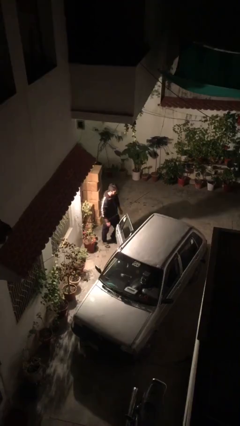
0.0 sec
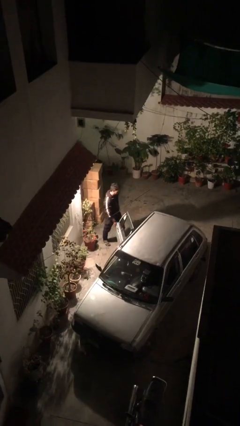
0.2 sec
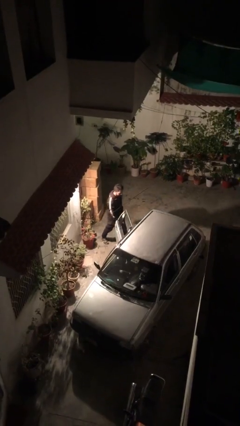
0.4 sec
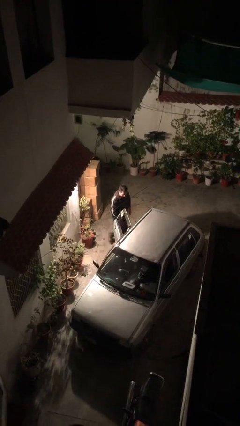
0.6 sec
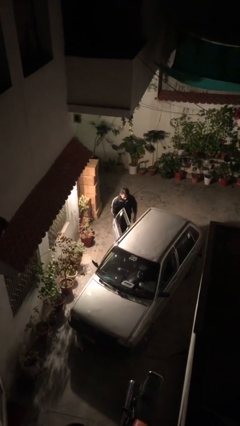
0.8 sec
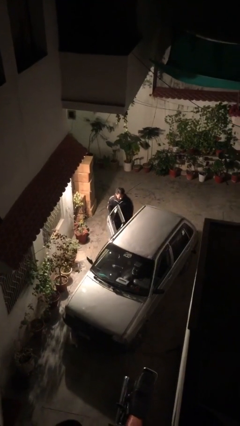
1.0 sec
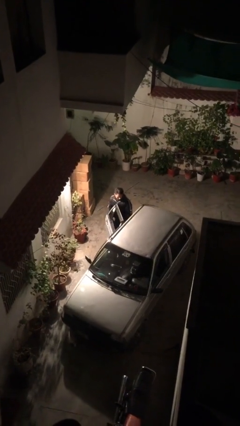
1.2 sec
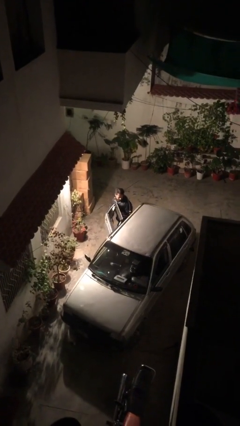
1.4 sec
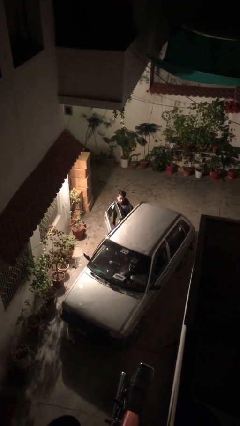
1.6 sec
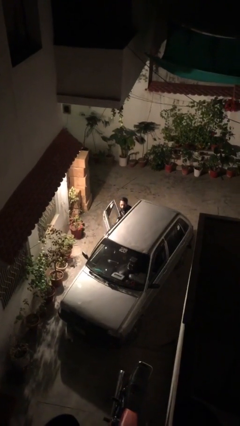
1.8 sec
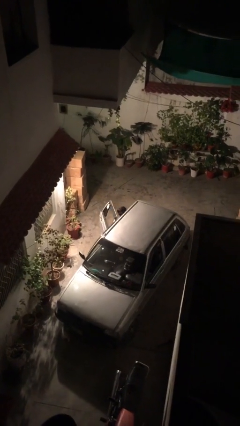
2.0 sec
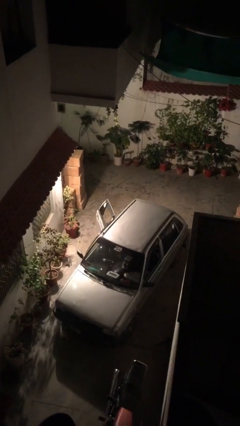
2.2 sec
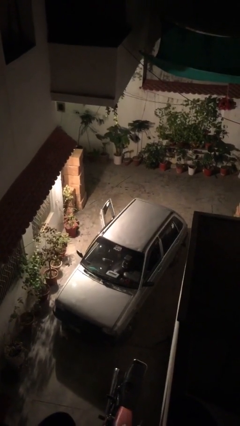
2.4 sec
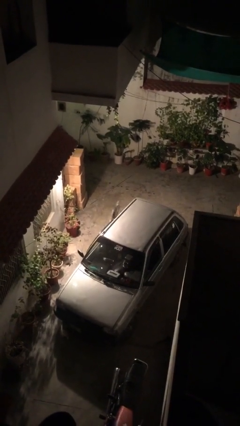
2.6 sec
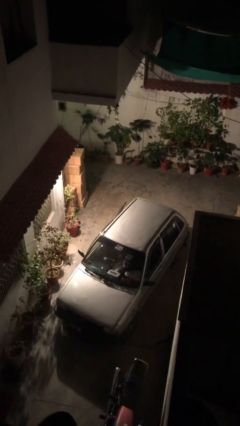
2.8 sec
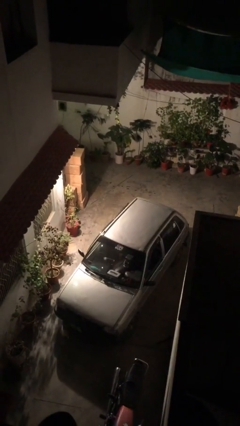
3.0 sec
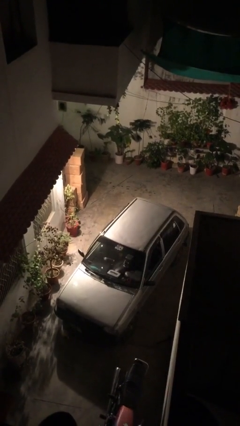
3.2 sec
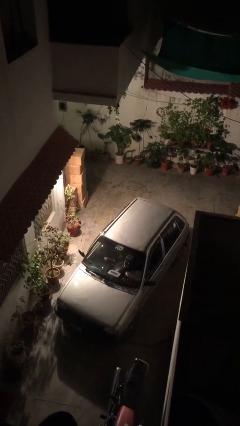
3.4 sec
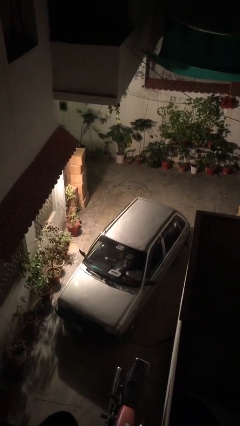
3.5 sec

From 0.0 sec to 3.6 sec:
person enters car

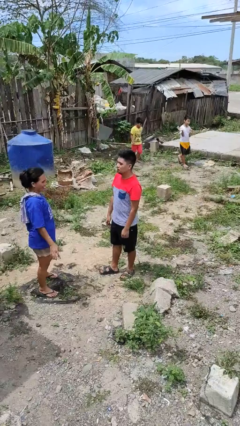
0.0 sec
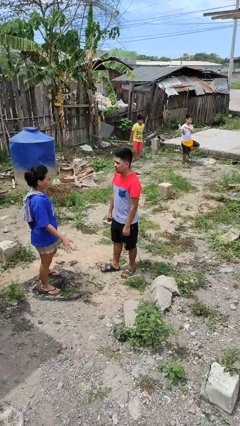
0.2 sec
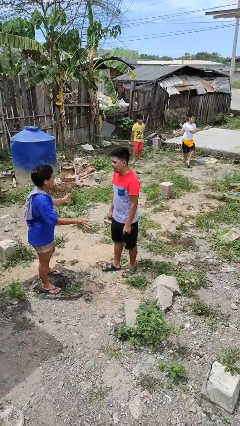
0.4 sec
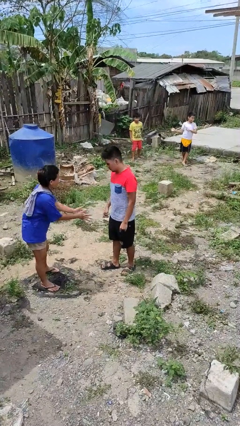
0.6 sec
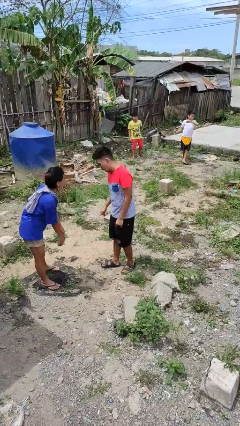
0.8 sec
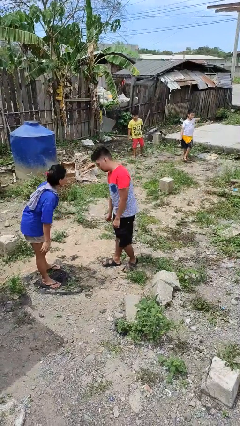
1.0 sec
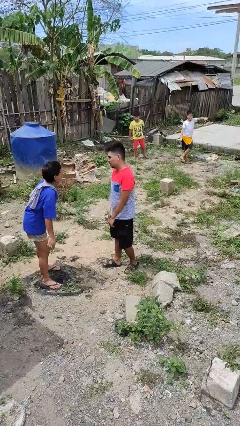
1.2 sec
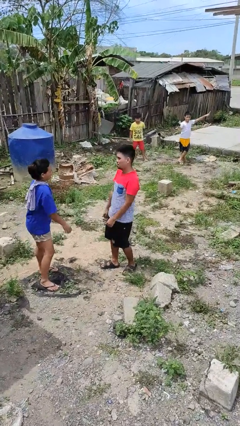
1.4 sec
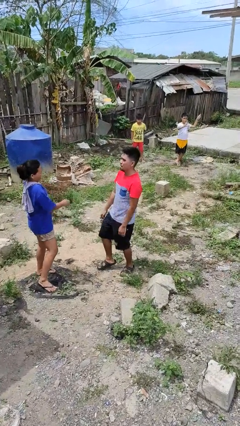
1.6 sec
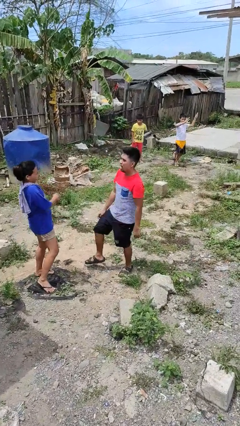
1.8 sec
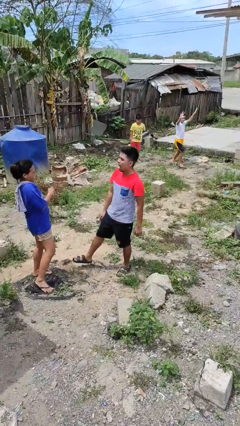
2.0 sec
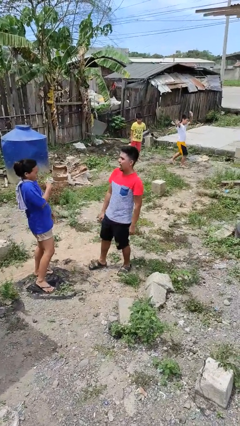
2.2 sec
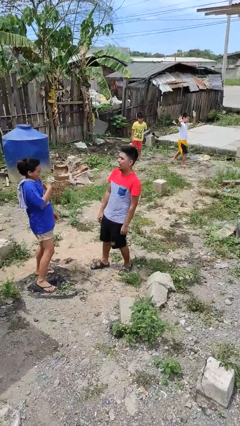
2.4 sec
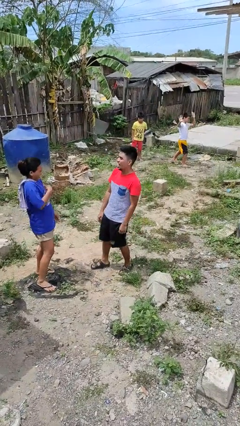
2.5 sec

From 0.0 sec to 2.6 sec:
person laughs with person

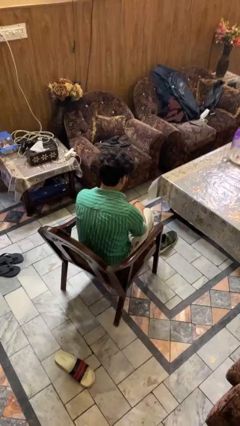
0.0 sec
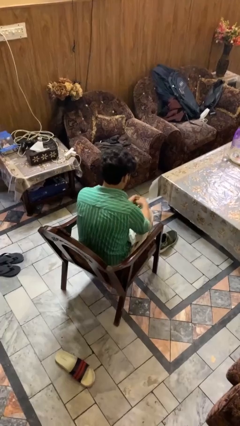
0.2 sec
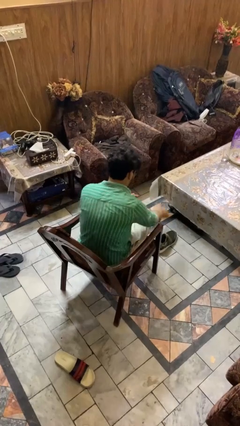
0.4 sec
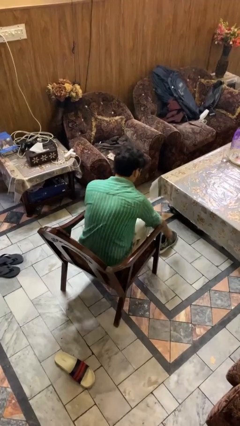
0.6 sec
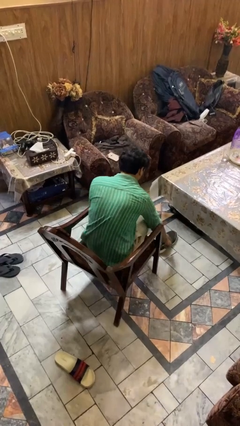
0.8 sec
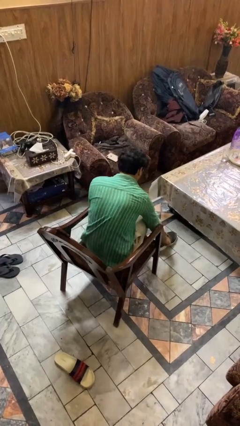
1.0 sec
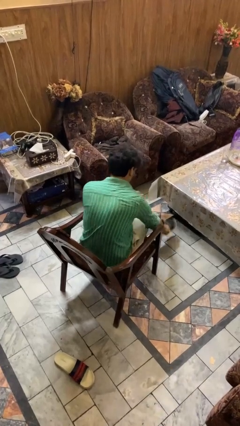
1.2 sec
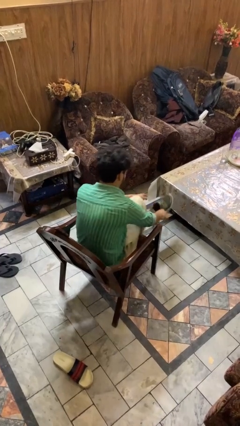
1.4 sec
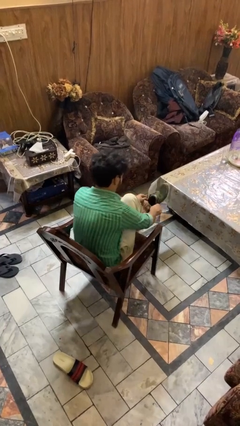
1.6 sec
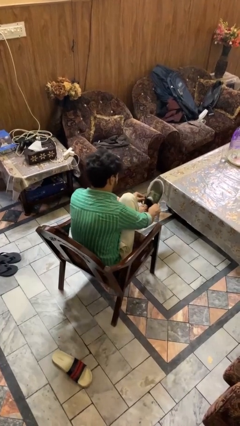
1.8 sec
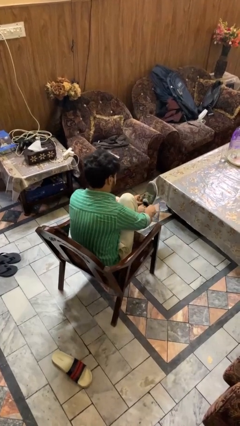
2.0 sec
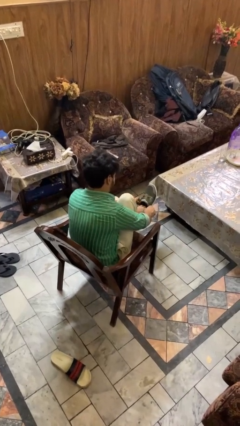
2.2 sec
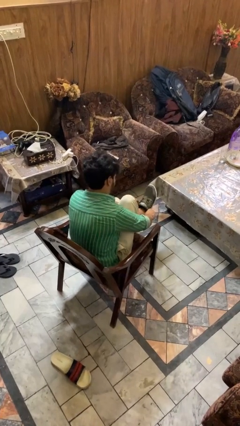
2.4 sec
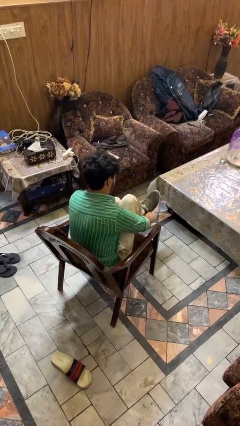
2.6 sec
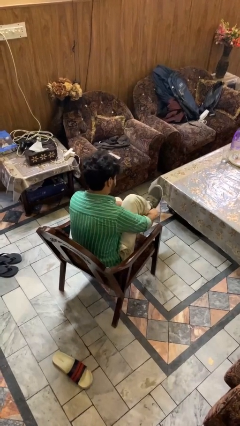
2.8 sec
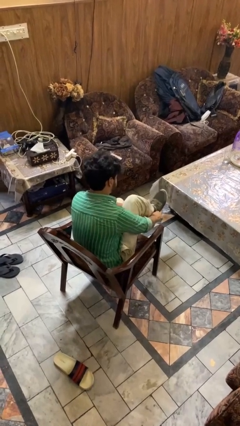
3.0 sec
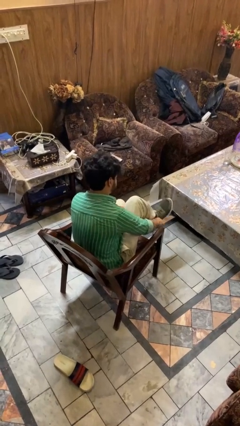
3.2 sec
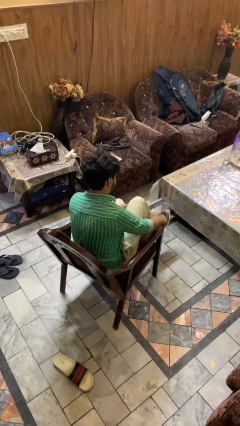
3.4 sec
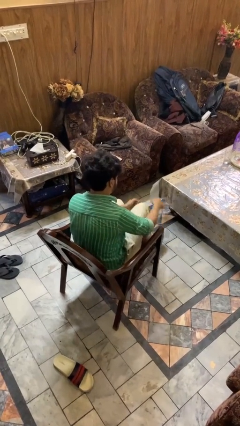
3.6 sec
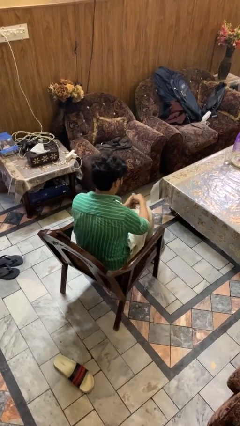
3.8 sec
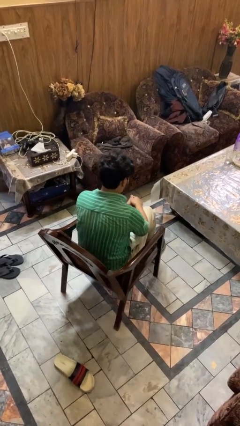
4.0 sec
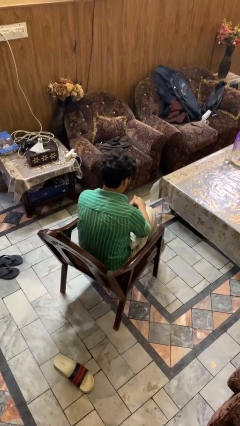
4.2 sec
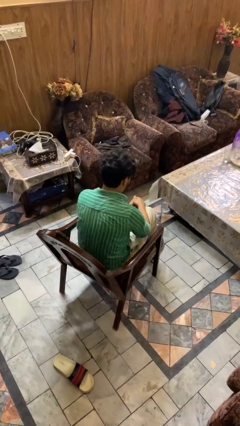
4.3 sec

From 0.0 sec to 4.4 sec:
person puts on shoes

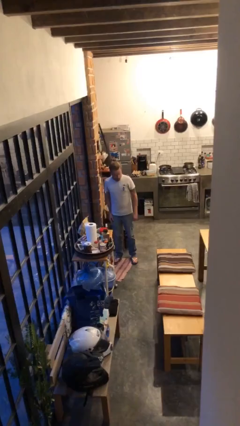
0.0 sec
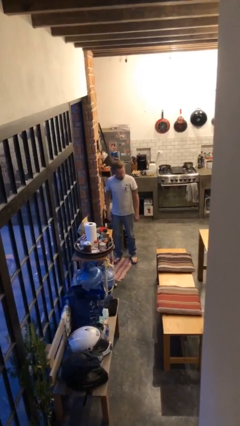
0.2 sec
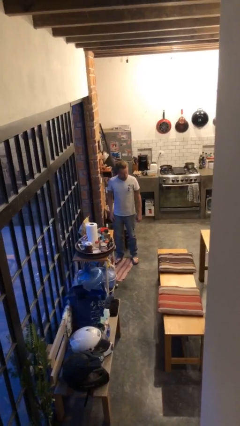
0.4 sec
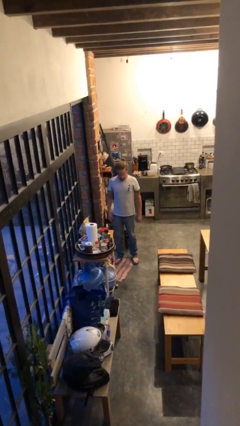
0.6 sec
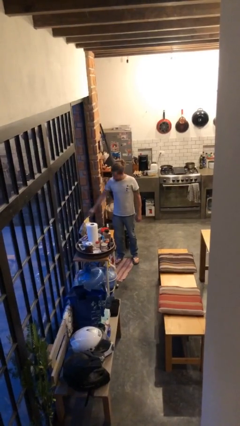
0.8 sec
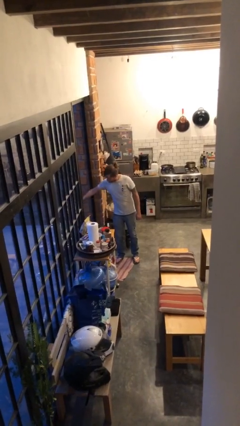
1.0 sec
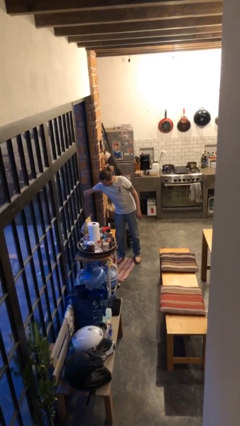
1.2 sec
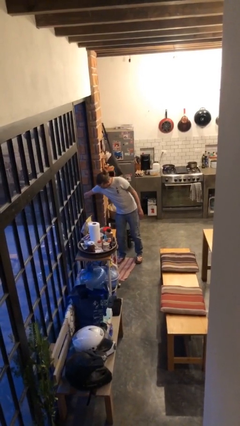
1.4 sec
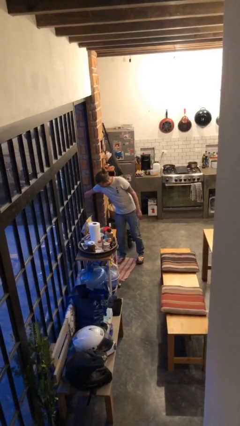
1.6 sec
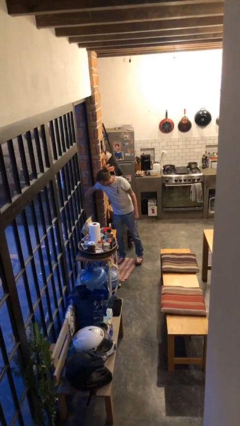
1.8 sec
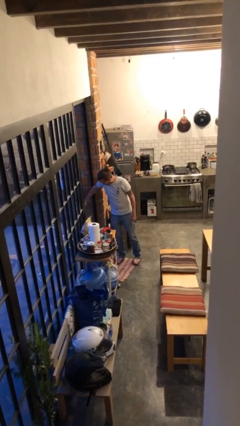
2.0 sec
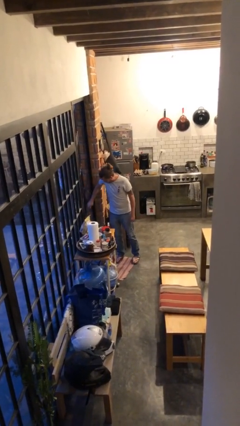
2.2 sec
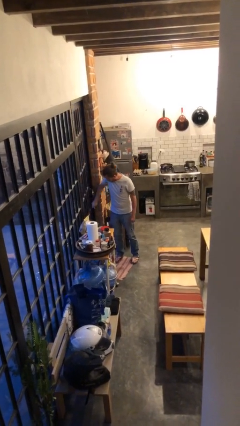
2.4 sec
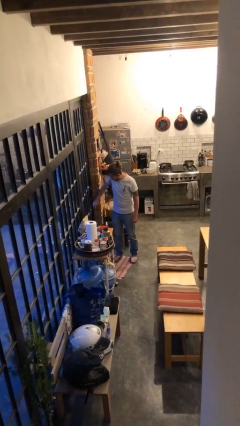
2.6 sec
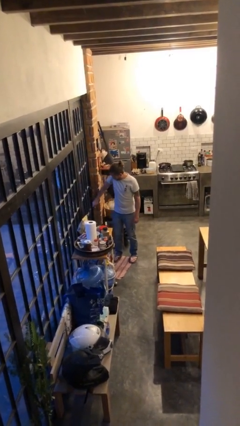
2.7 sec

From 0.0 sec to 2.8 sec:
person closes facility door

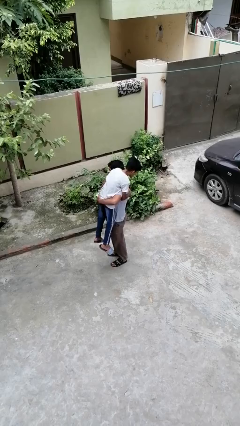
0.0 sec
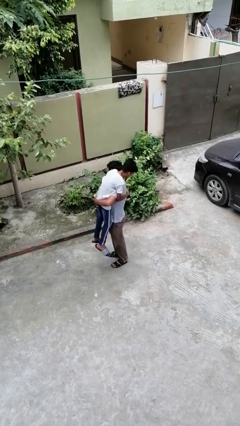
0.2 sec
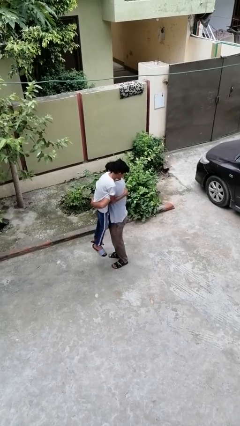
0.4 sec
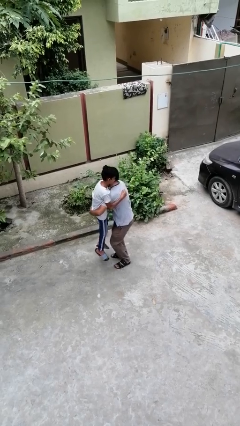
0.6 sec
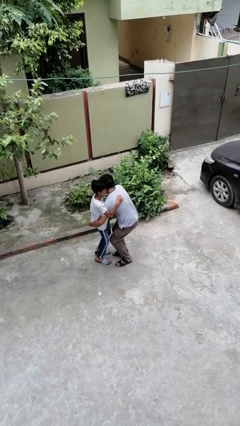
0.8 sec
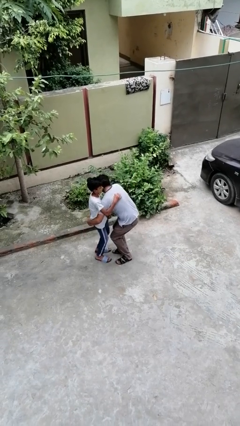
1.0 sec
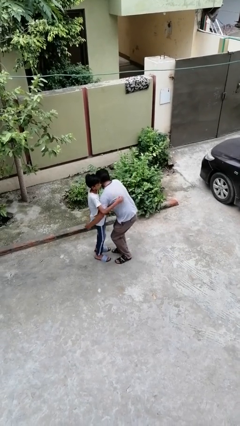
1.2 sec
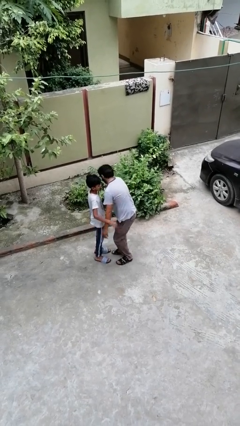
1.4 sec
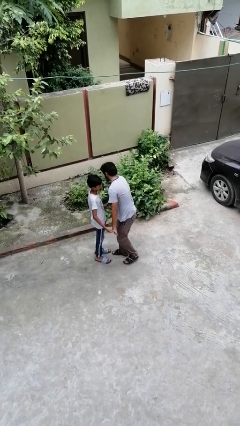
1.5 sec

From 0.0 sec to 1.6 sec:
person puts down person

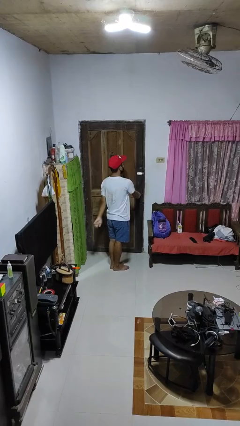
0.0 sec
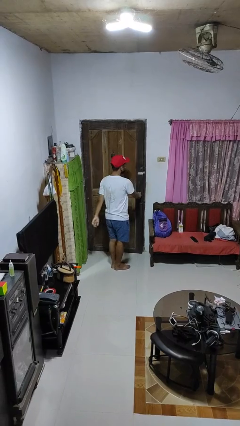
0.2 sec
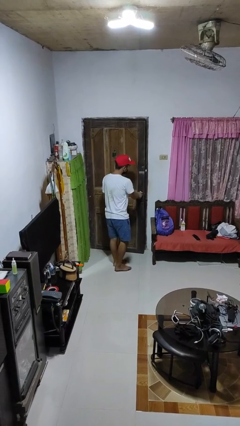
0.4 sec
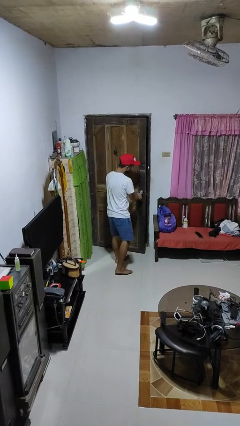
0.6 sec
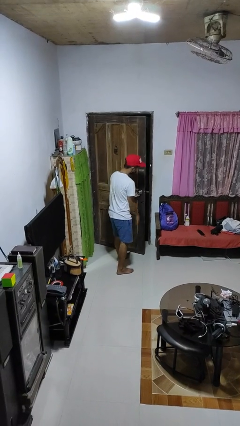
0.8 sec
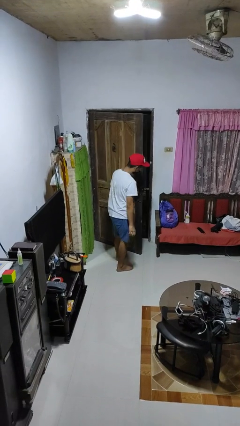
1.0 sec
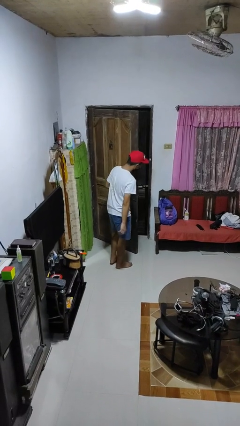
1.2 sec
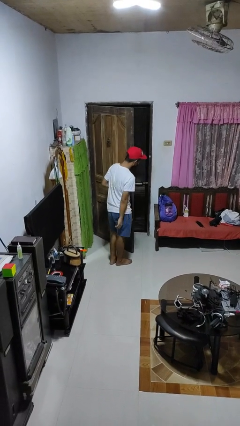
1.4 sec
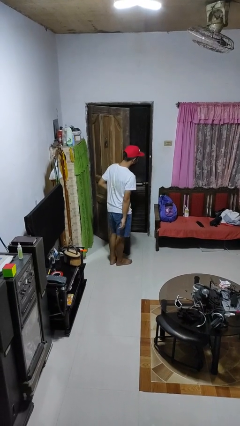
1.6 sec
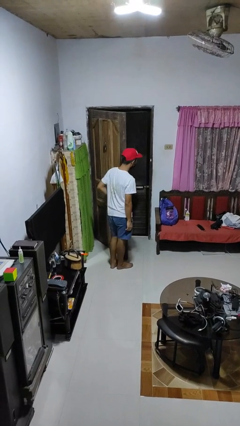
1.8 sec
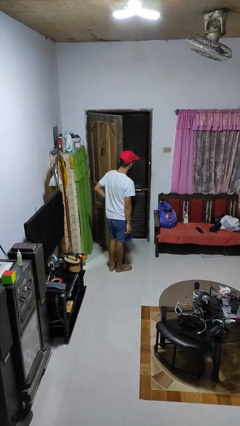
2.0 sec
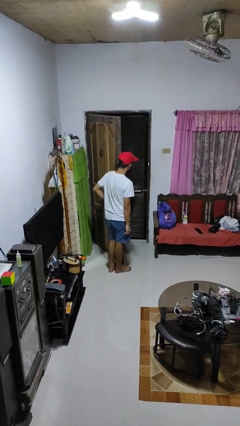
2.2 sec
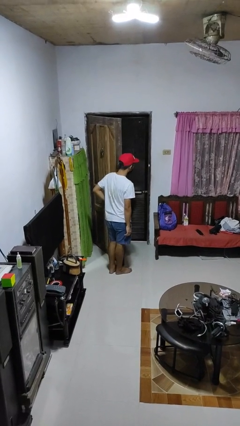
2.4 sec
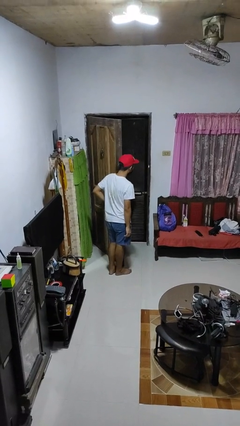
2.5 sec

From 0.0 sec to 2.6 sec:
person opens facility door
